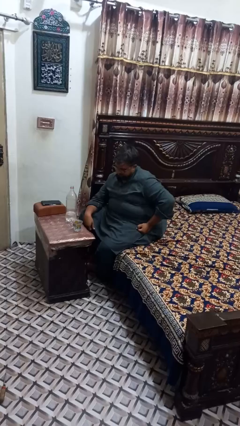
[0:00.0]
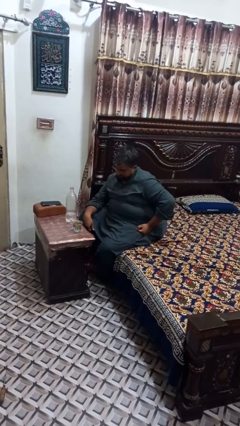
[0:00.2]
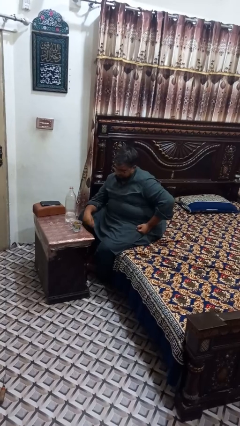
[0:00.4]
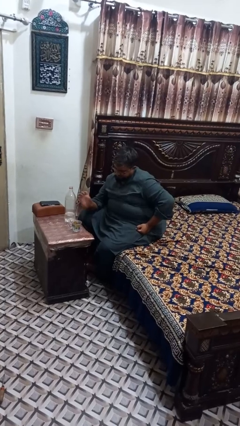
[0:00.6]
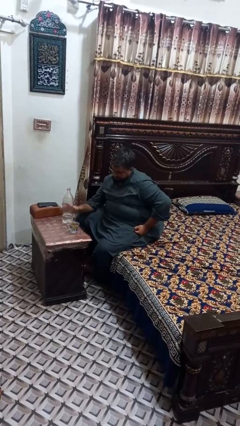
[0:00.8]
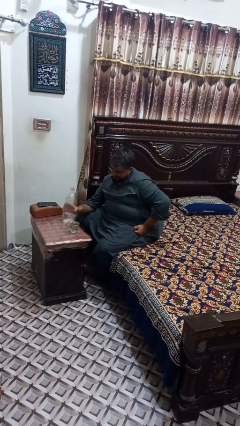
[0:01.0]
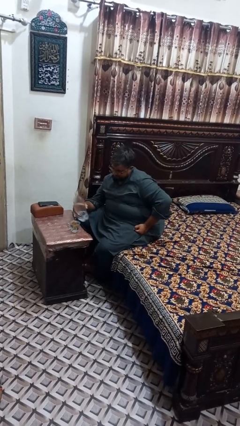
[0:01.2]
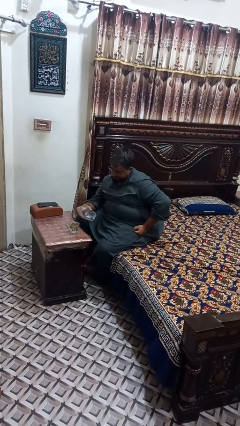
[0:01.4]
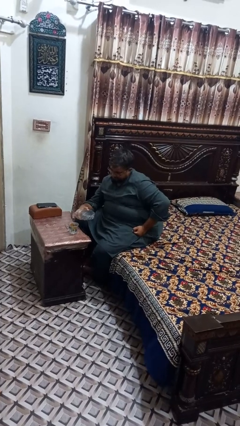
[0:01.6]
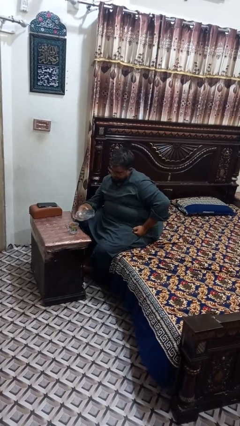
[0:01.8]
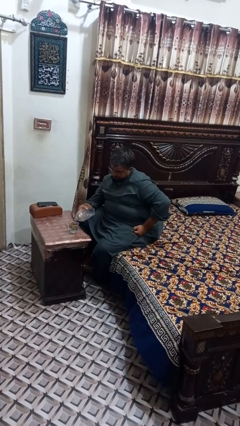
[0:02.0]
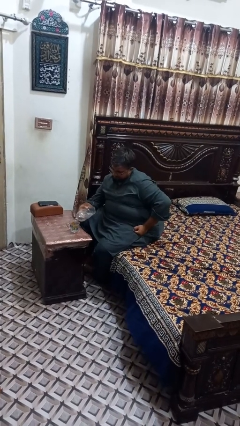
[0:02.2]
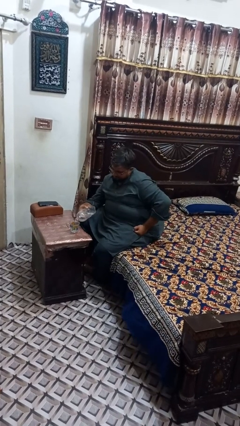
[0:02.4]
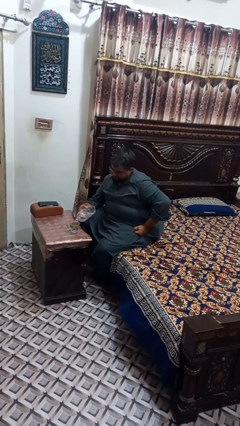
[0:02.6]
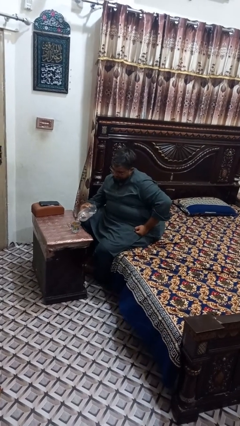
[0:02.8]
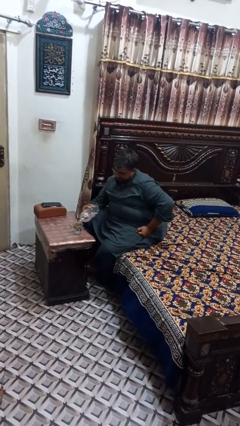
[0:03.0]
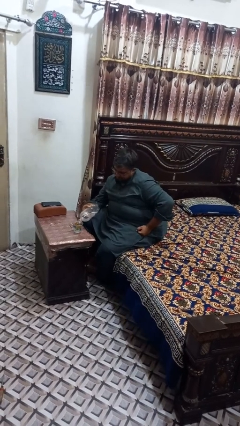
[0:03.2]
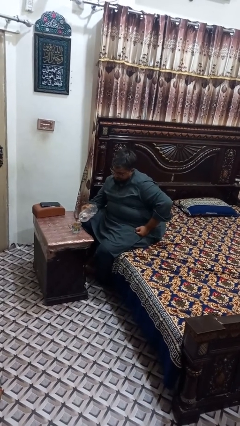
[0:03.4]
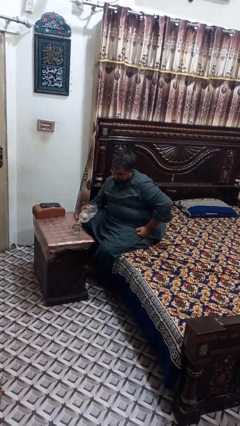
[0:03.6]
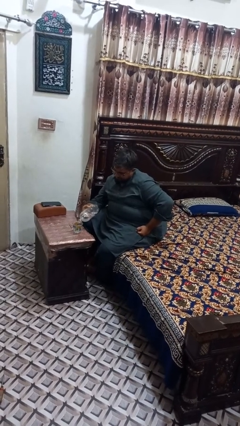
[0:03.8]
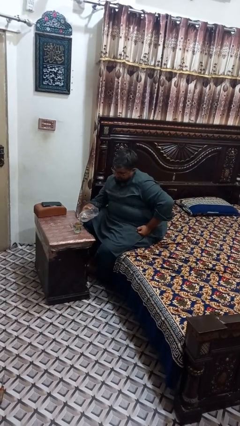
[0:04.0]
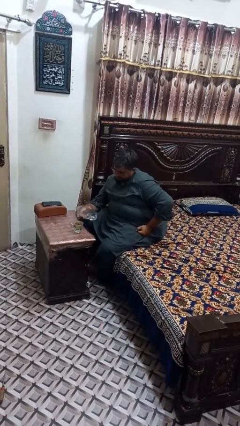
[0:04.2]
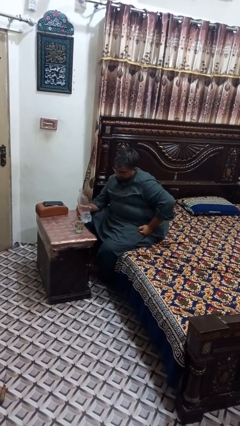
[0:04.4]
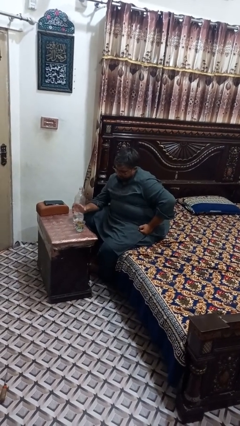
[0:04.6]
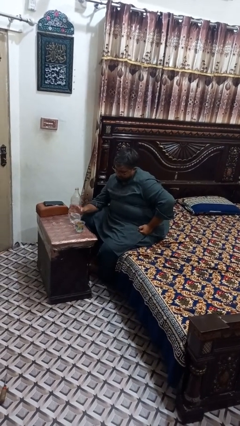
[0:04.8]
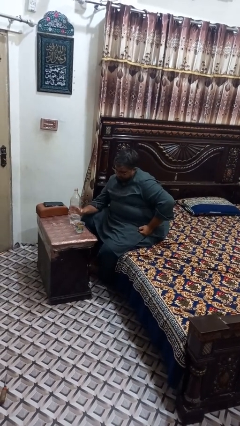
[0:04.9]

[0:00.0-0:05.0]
person pours liquid into cup

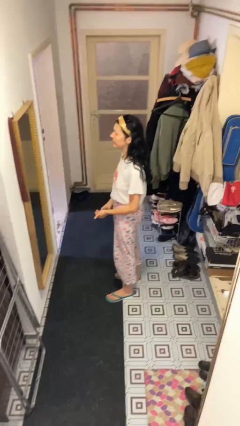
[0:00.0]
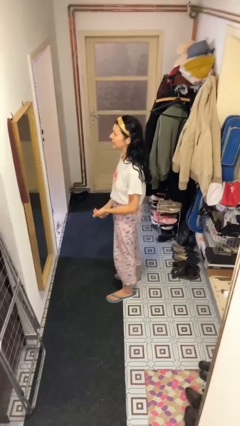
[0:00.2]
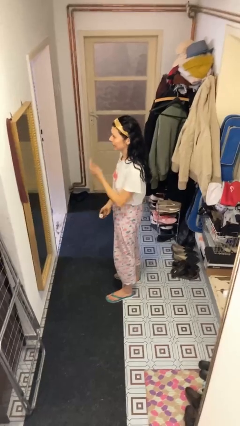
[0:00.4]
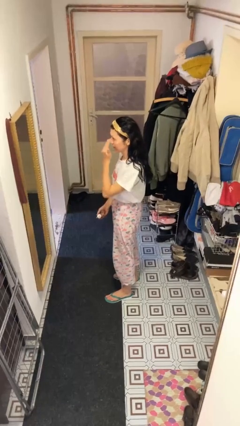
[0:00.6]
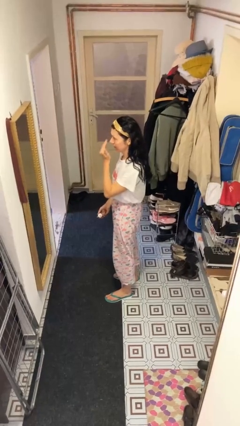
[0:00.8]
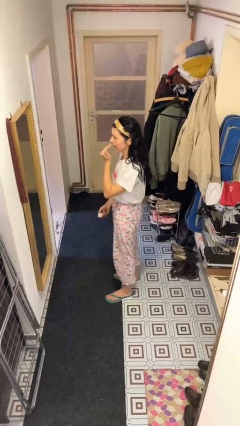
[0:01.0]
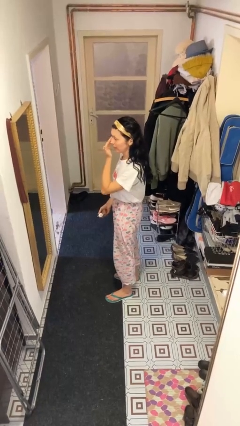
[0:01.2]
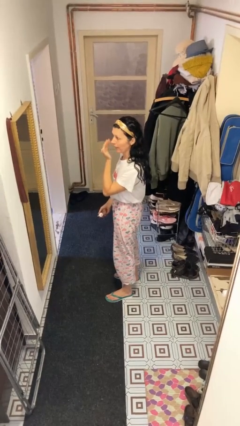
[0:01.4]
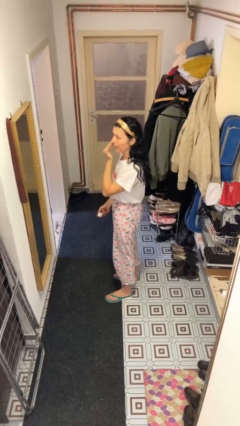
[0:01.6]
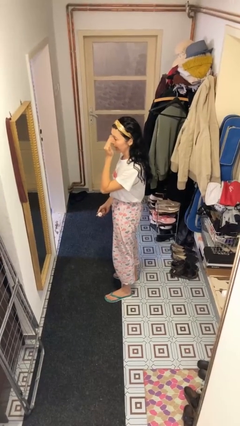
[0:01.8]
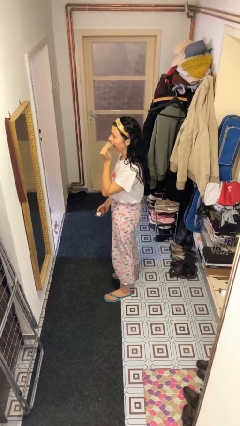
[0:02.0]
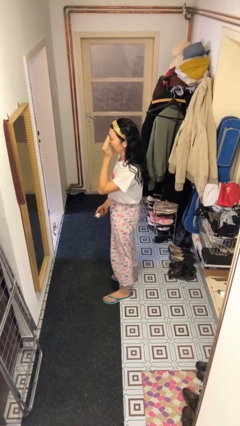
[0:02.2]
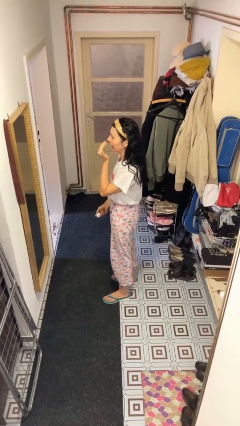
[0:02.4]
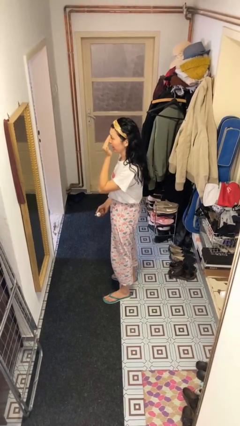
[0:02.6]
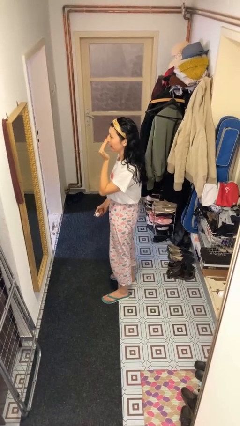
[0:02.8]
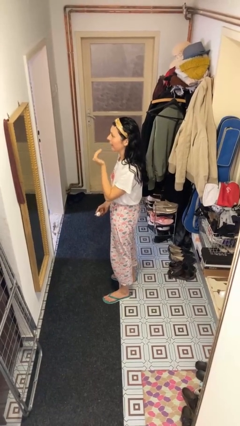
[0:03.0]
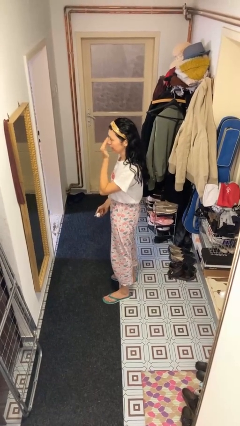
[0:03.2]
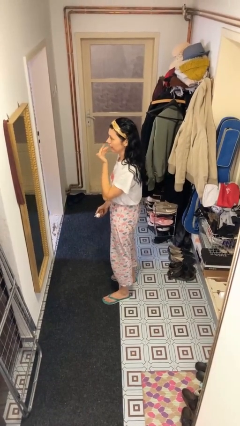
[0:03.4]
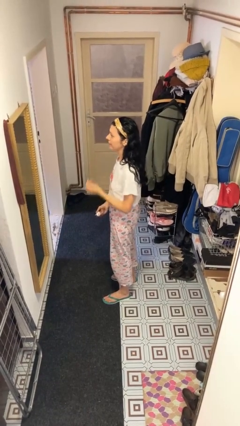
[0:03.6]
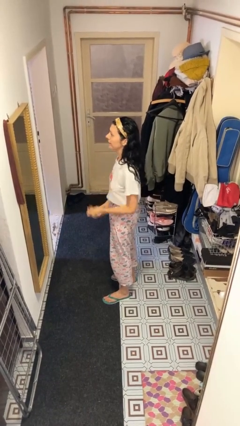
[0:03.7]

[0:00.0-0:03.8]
person applies foundation makeup

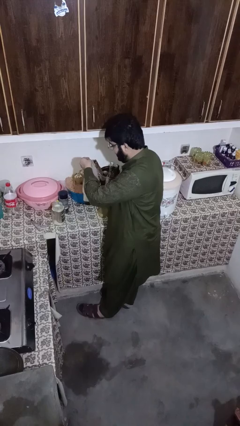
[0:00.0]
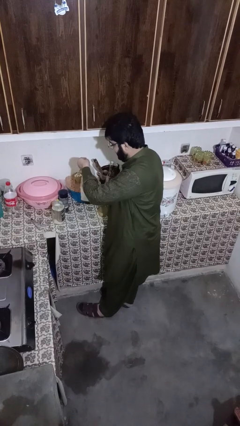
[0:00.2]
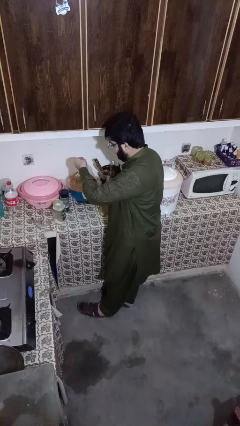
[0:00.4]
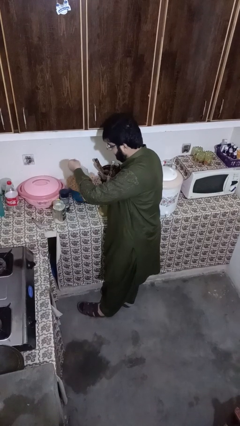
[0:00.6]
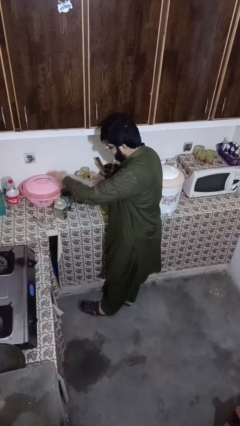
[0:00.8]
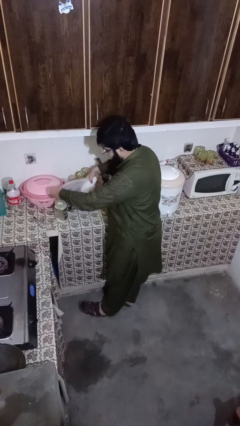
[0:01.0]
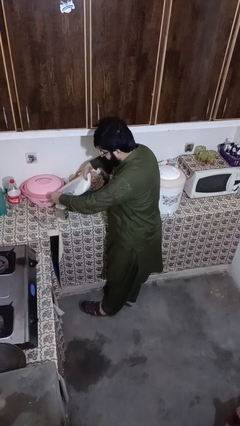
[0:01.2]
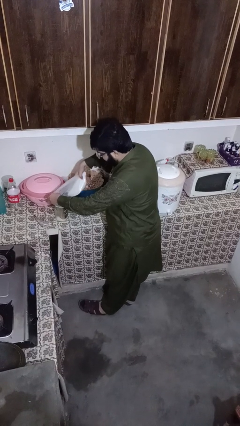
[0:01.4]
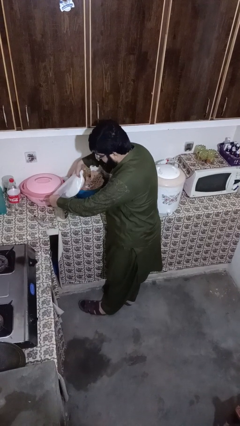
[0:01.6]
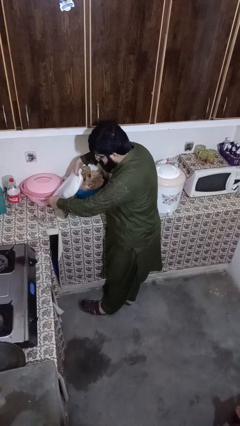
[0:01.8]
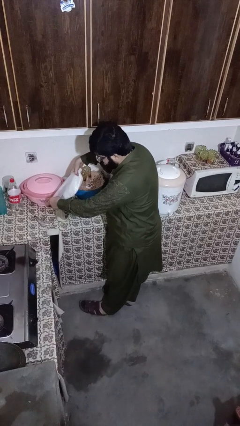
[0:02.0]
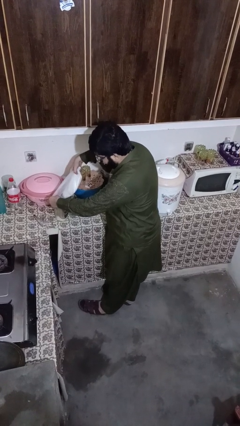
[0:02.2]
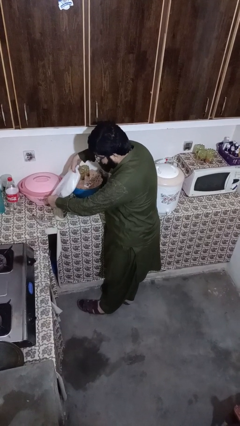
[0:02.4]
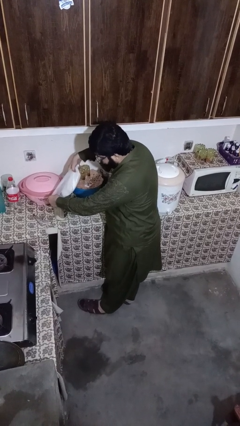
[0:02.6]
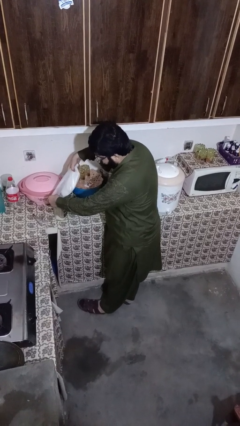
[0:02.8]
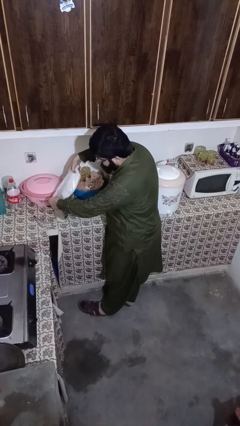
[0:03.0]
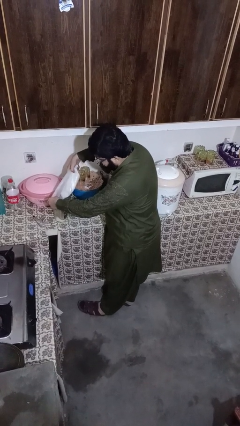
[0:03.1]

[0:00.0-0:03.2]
person pours into bowl

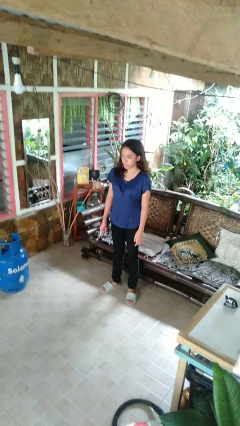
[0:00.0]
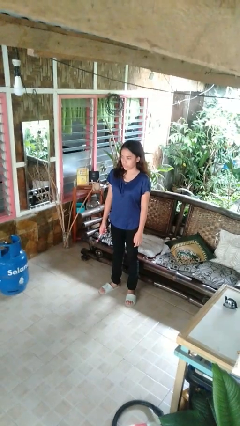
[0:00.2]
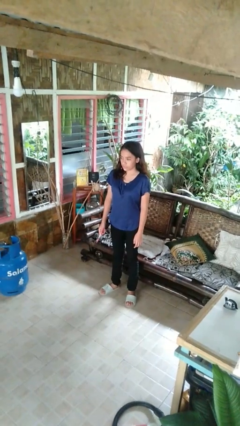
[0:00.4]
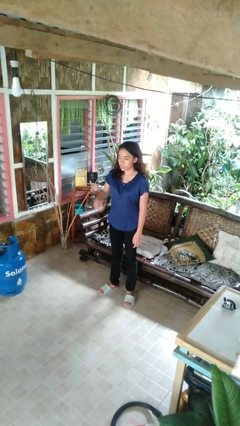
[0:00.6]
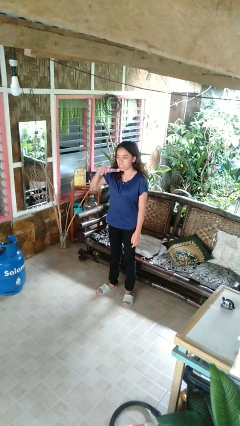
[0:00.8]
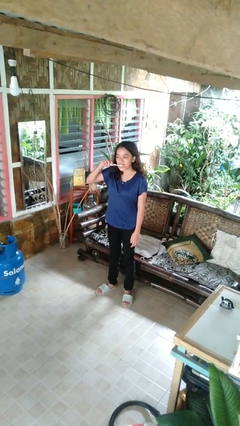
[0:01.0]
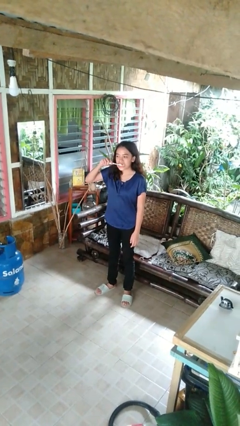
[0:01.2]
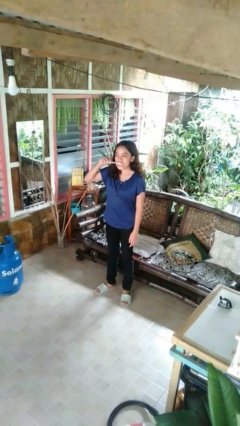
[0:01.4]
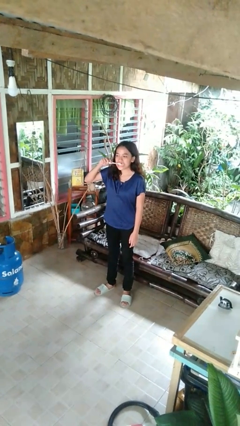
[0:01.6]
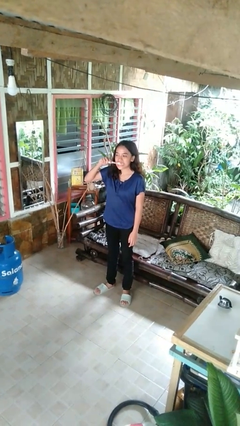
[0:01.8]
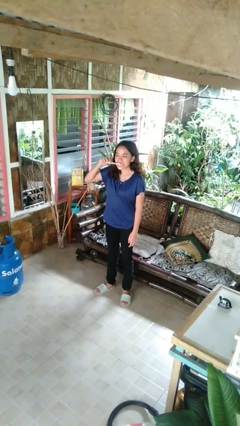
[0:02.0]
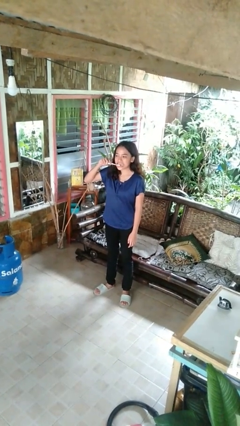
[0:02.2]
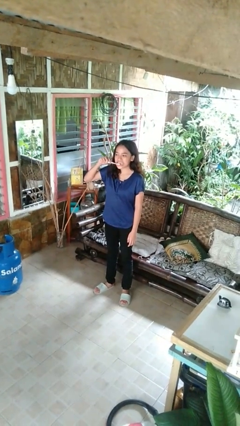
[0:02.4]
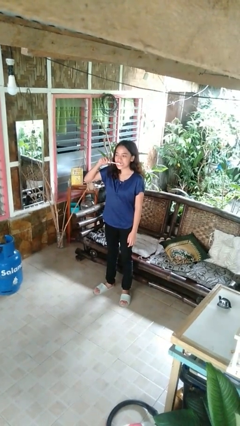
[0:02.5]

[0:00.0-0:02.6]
person brushes teeth

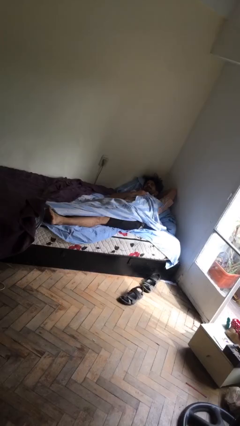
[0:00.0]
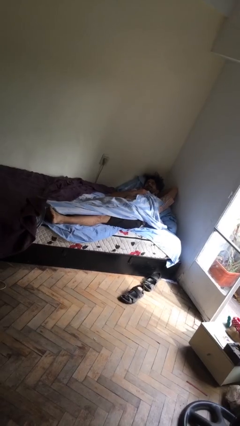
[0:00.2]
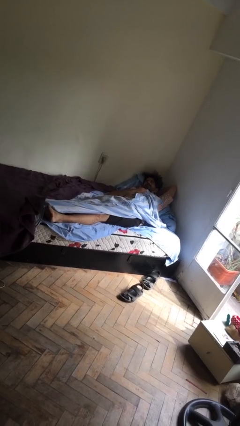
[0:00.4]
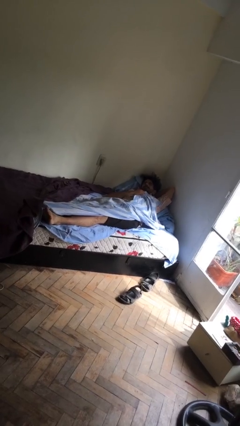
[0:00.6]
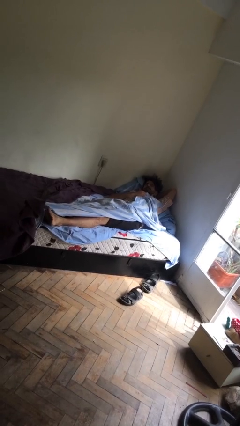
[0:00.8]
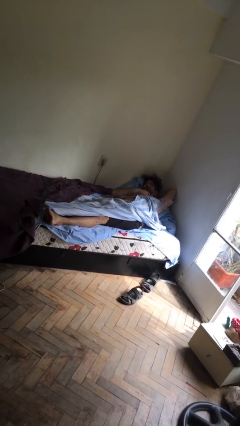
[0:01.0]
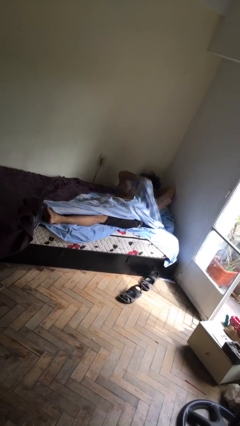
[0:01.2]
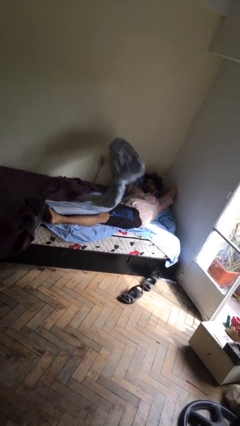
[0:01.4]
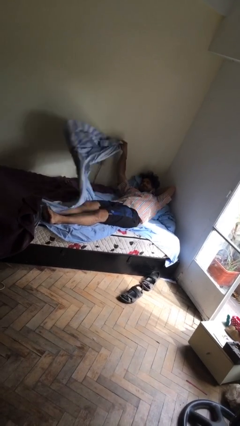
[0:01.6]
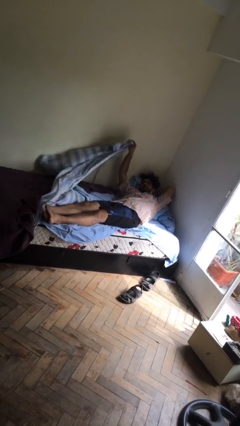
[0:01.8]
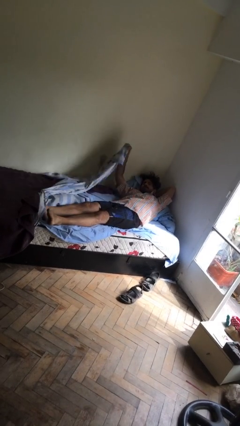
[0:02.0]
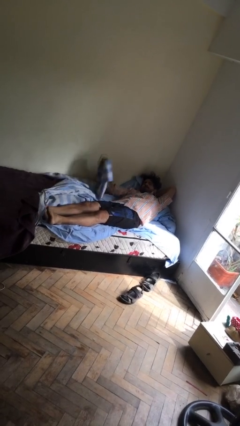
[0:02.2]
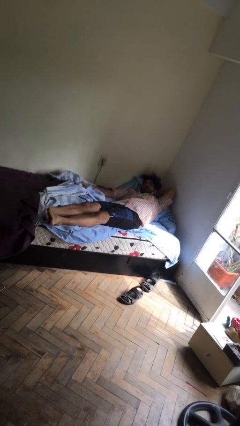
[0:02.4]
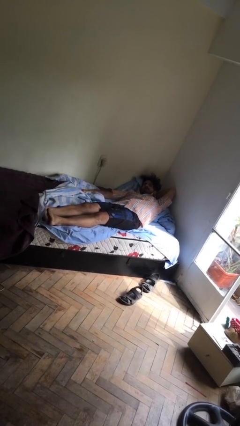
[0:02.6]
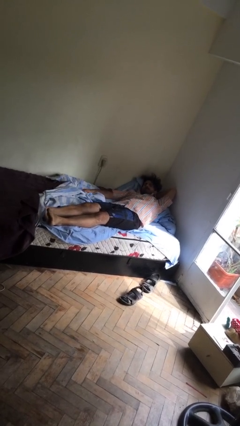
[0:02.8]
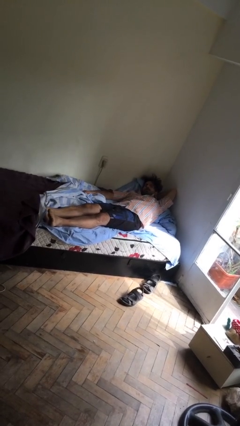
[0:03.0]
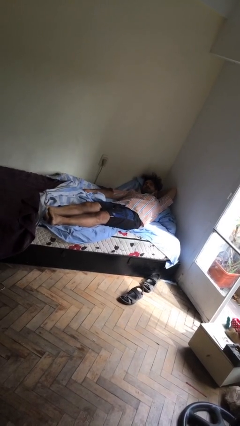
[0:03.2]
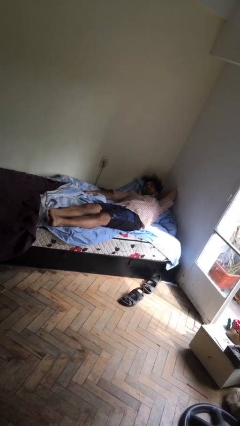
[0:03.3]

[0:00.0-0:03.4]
person uncovers with bedsheets
